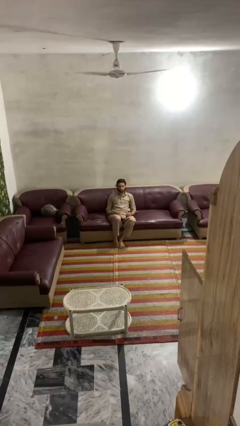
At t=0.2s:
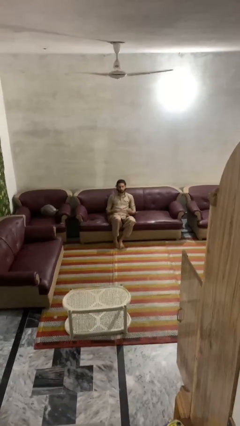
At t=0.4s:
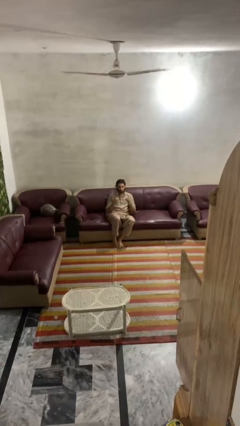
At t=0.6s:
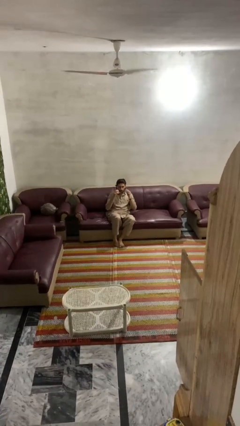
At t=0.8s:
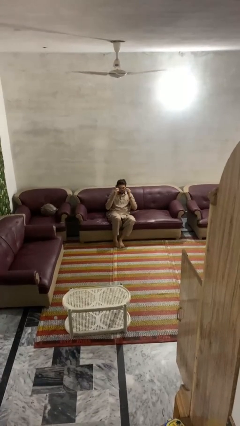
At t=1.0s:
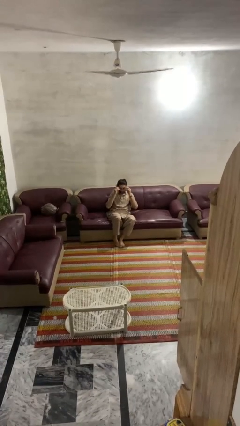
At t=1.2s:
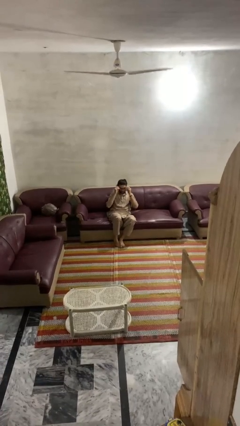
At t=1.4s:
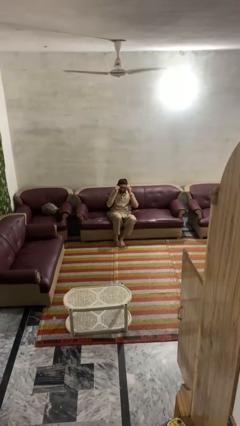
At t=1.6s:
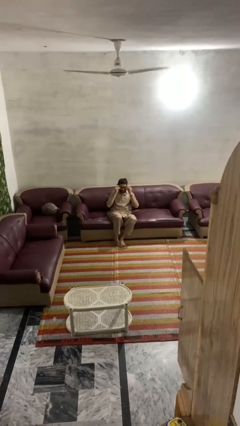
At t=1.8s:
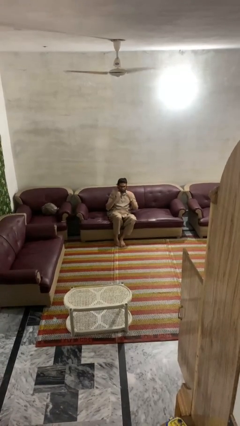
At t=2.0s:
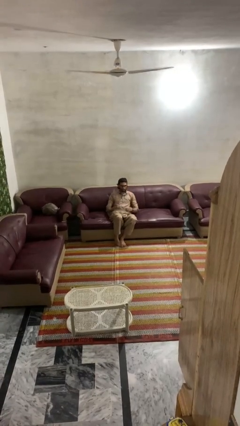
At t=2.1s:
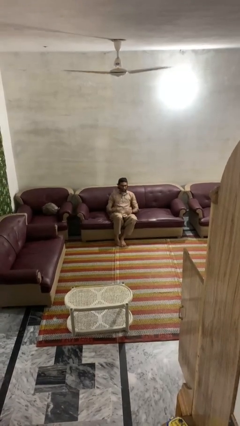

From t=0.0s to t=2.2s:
person puts on glasses

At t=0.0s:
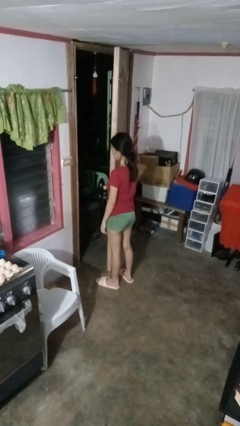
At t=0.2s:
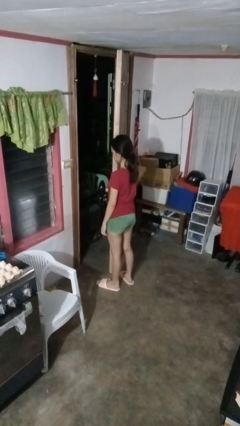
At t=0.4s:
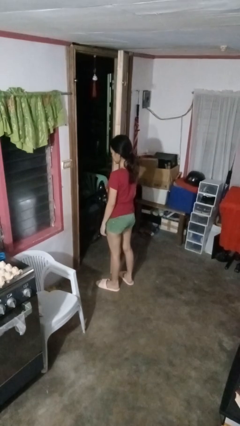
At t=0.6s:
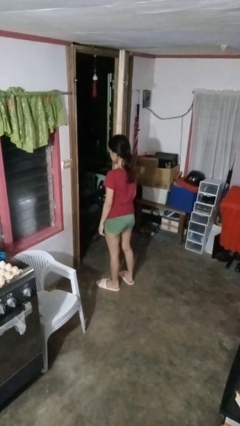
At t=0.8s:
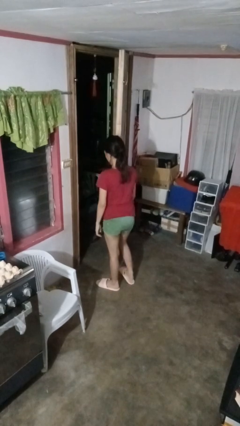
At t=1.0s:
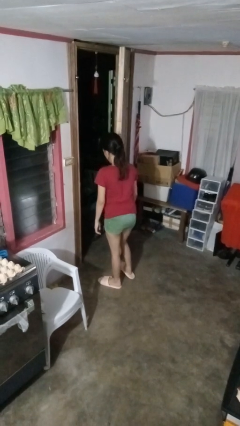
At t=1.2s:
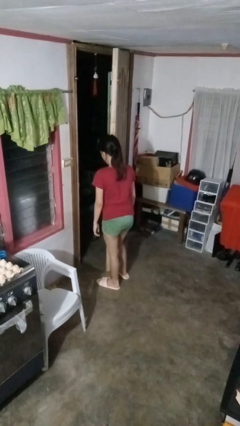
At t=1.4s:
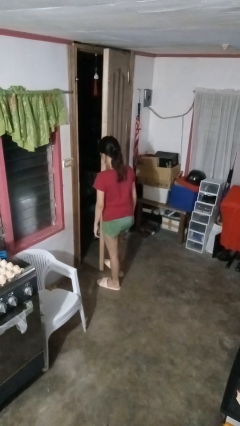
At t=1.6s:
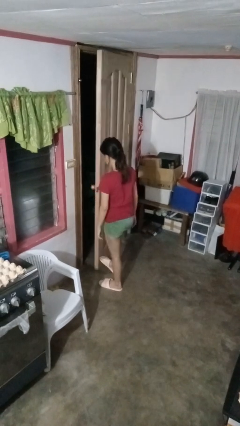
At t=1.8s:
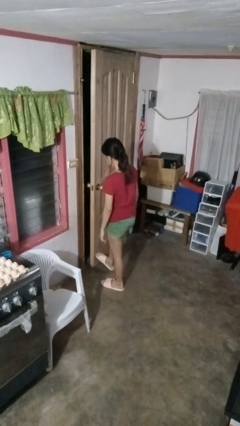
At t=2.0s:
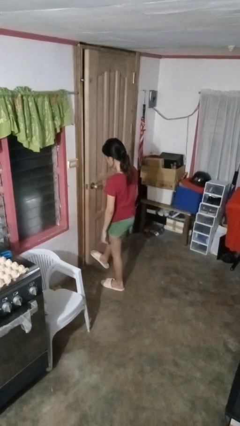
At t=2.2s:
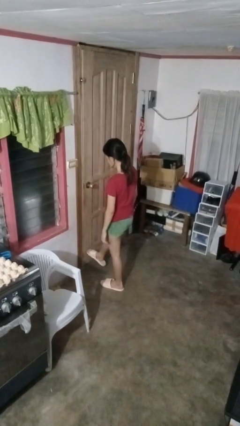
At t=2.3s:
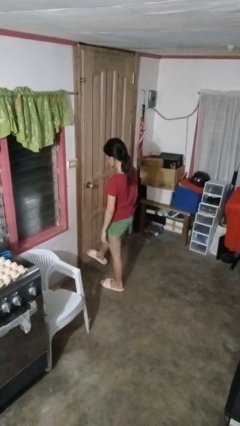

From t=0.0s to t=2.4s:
person closes door with foot

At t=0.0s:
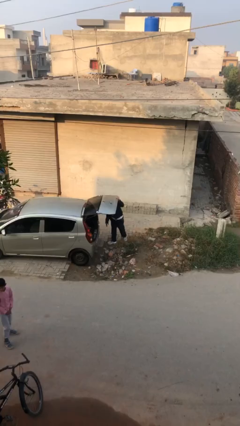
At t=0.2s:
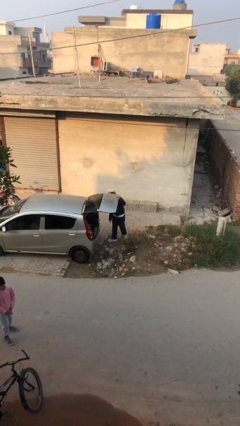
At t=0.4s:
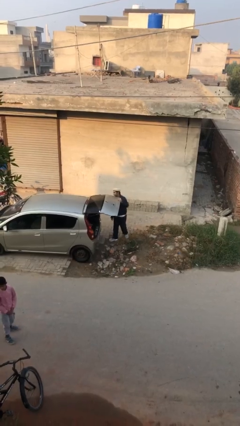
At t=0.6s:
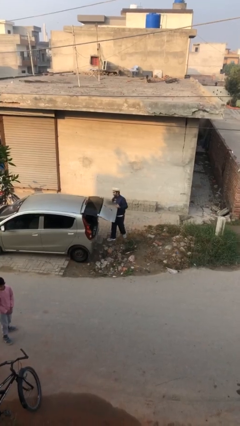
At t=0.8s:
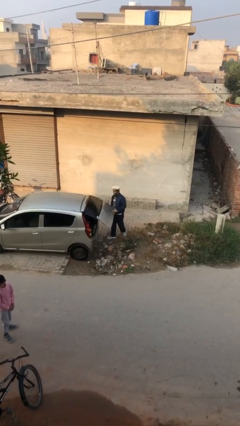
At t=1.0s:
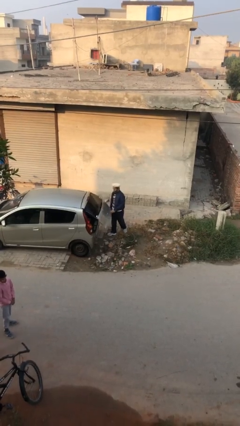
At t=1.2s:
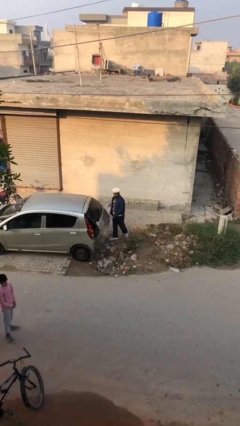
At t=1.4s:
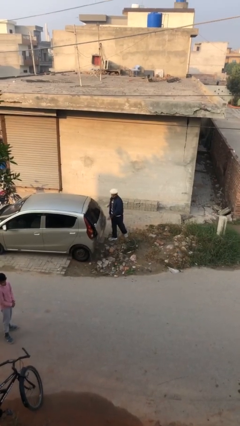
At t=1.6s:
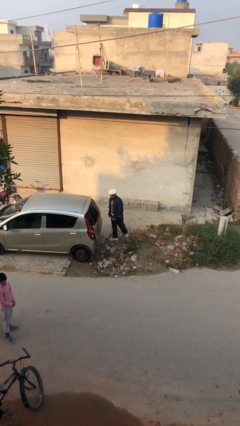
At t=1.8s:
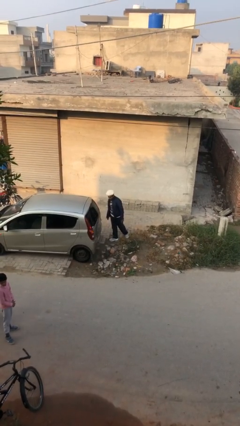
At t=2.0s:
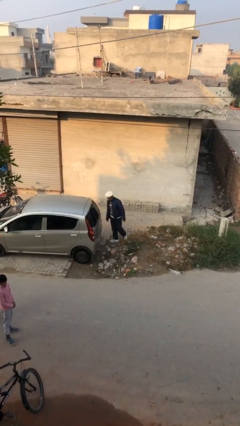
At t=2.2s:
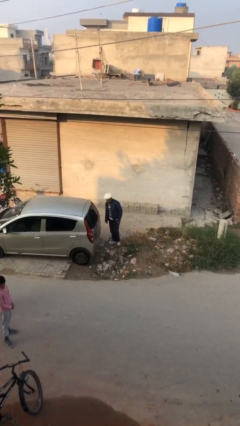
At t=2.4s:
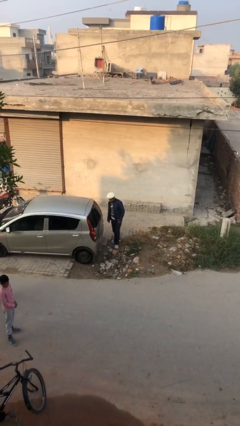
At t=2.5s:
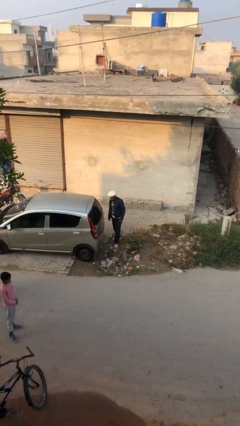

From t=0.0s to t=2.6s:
person closes car trunk

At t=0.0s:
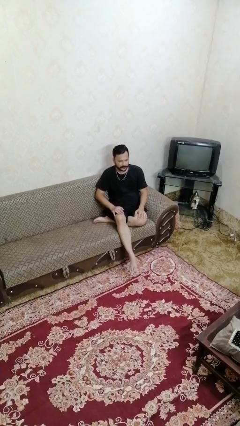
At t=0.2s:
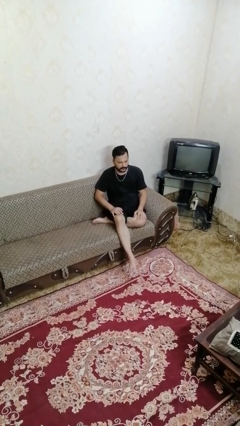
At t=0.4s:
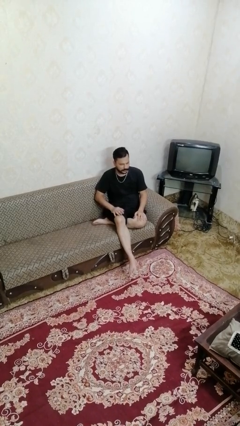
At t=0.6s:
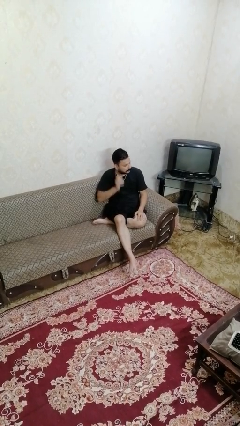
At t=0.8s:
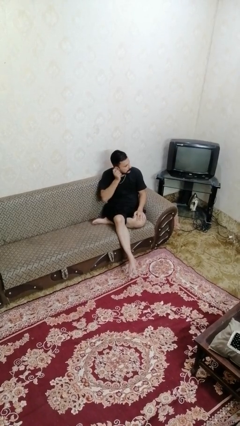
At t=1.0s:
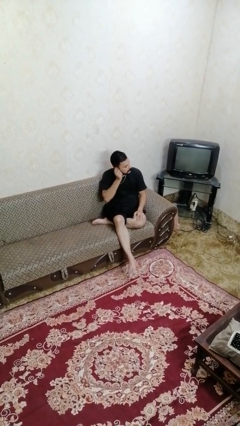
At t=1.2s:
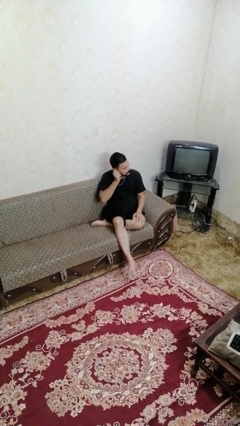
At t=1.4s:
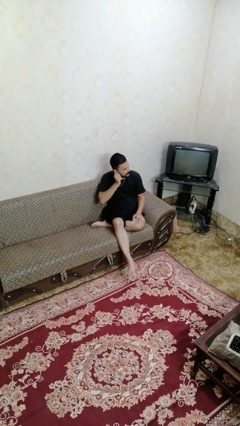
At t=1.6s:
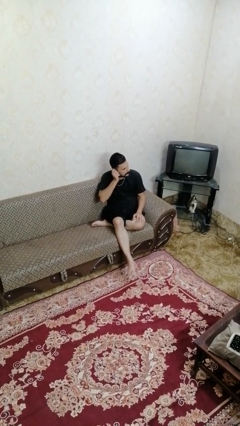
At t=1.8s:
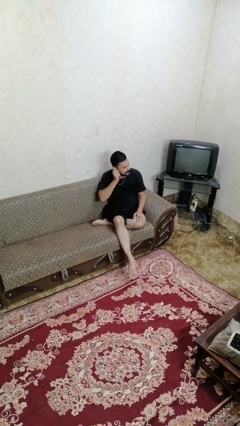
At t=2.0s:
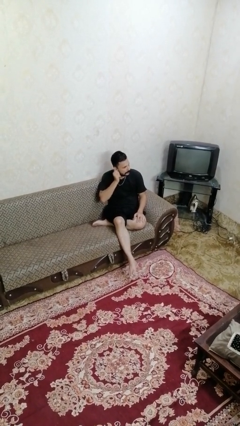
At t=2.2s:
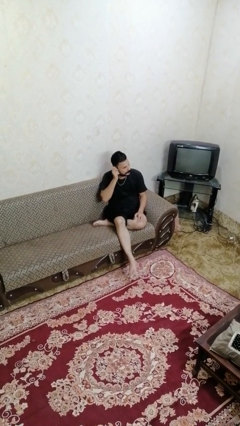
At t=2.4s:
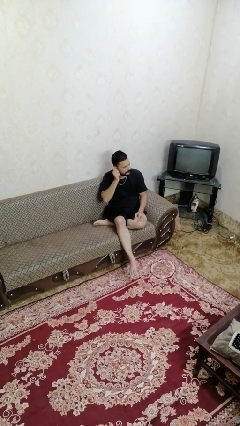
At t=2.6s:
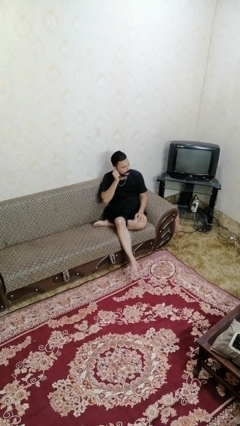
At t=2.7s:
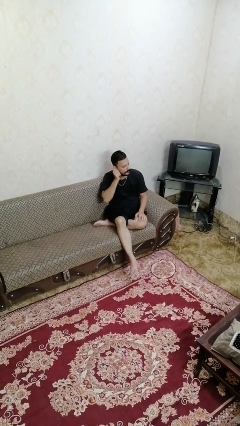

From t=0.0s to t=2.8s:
person touches earlobe

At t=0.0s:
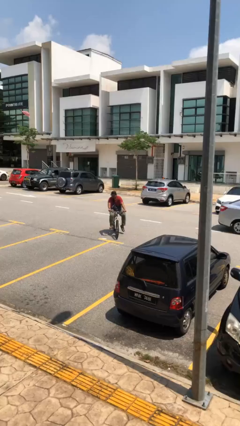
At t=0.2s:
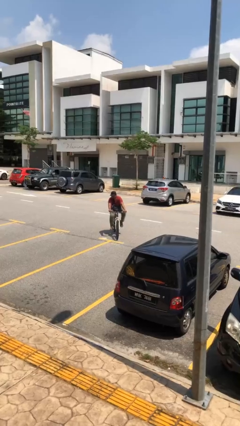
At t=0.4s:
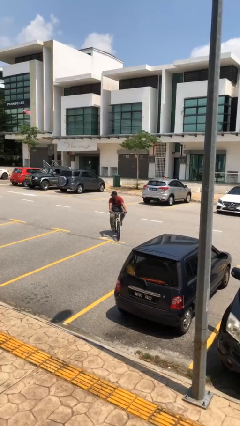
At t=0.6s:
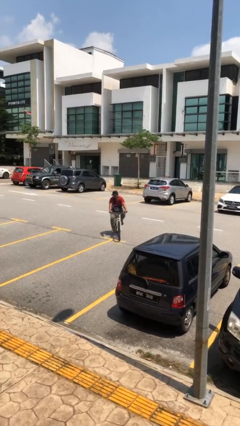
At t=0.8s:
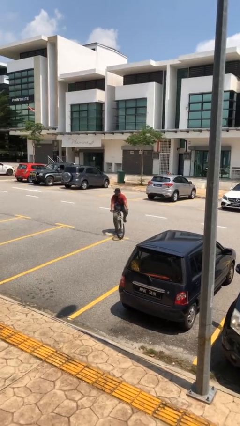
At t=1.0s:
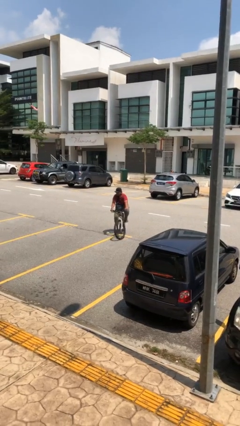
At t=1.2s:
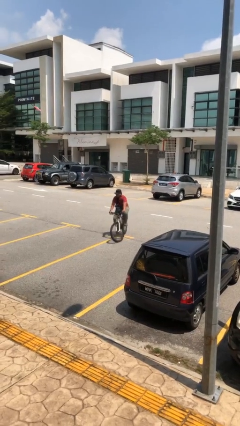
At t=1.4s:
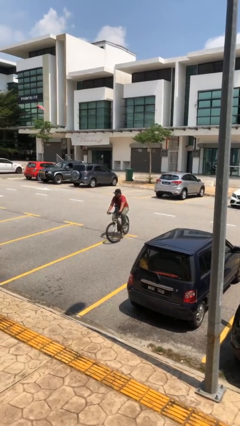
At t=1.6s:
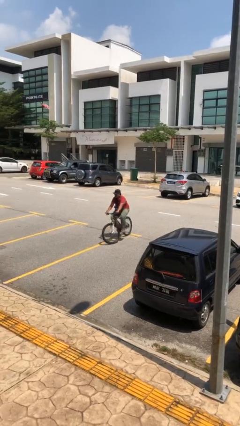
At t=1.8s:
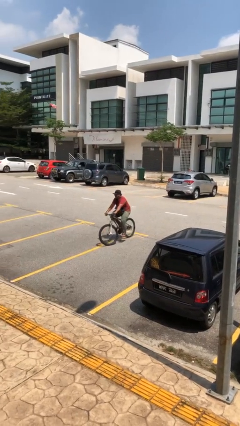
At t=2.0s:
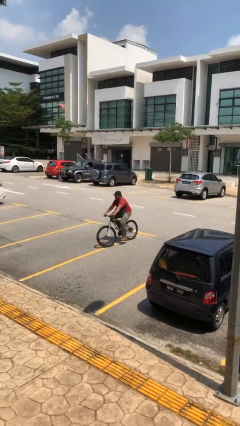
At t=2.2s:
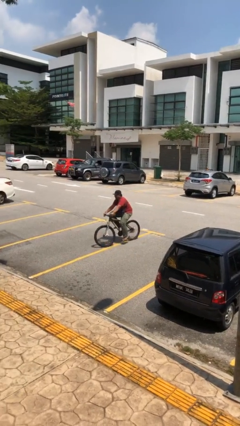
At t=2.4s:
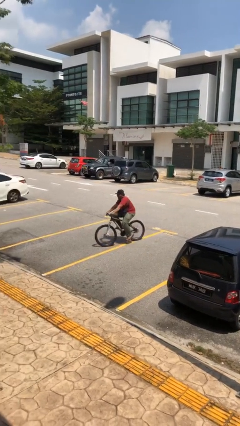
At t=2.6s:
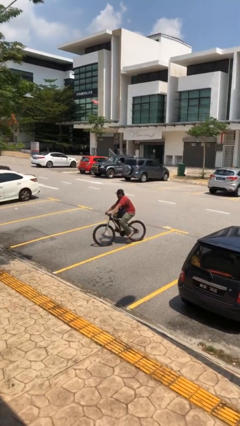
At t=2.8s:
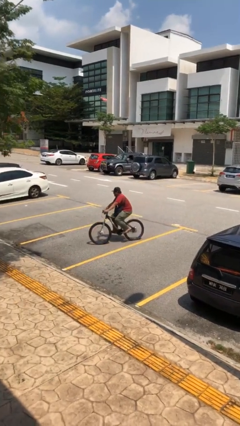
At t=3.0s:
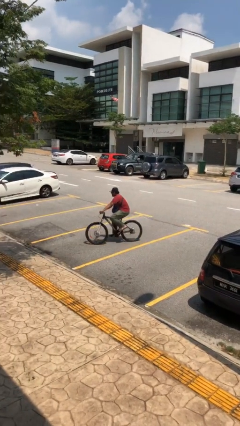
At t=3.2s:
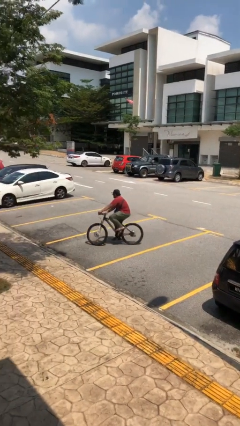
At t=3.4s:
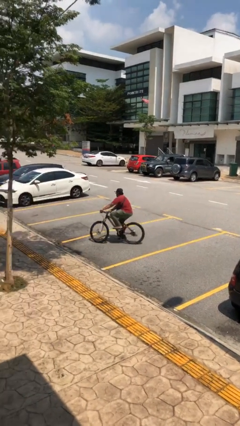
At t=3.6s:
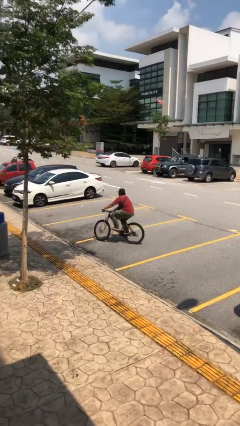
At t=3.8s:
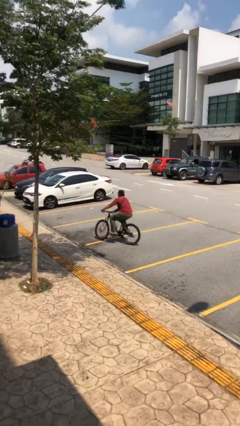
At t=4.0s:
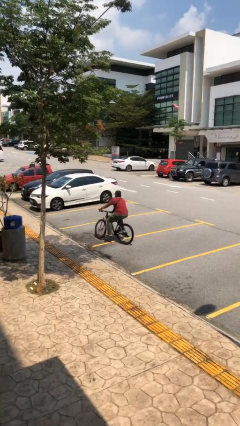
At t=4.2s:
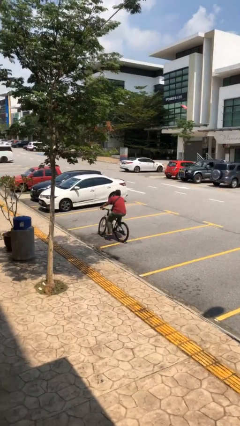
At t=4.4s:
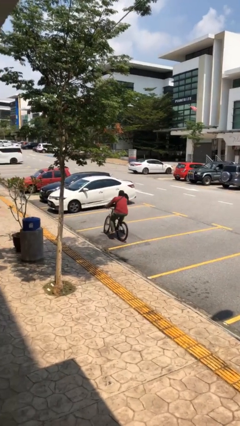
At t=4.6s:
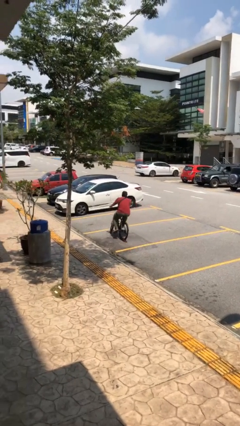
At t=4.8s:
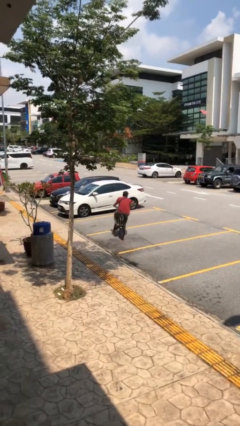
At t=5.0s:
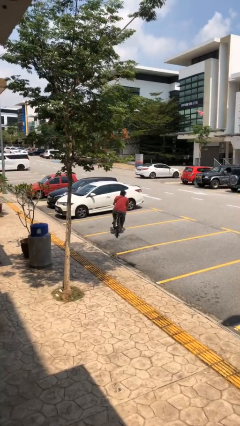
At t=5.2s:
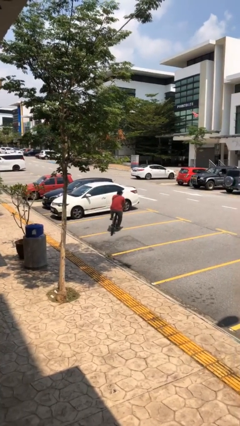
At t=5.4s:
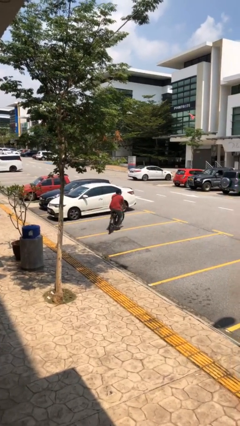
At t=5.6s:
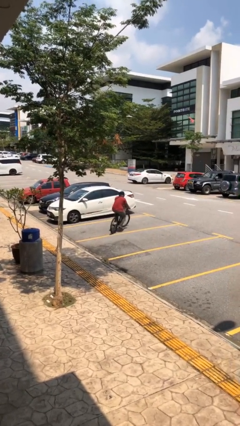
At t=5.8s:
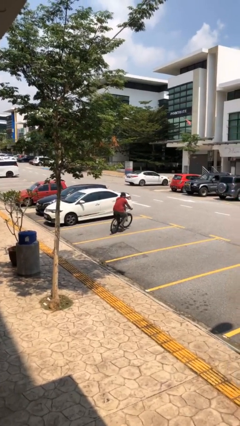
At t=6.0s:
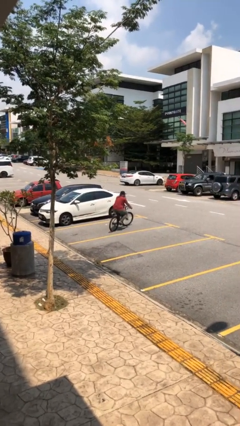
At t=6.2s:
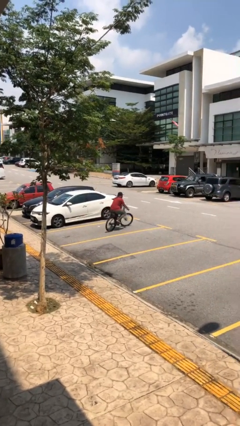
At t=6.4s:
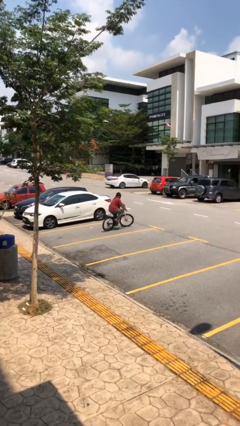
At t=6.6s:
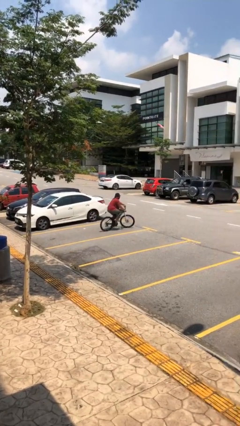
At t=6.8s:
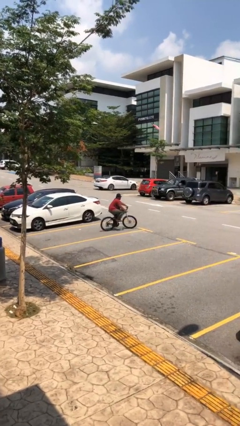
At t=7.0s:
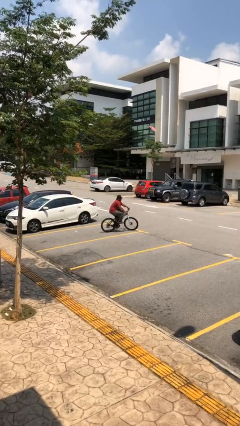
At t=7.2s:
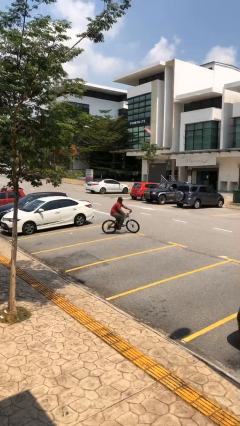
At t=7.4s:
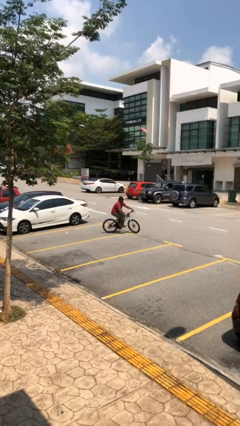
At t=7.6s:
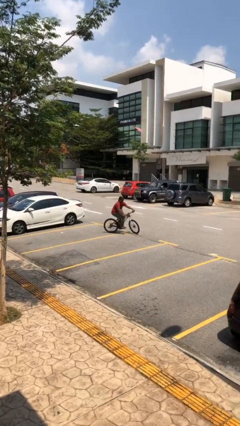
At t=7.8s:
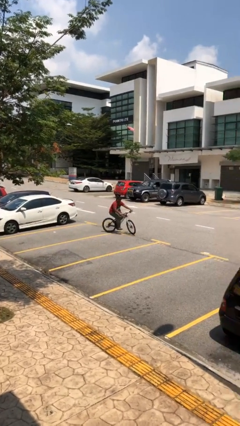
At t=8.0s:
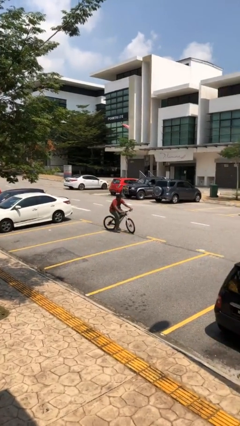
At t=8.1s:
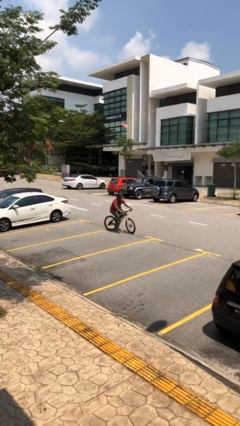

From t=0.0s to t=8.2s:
person rides bicycle
